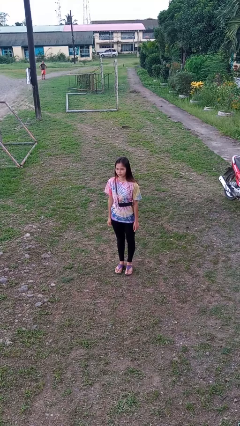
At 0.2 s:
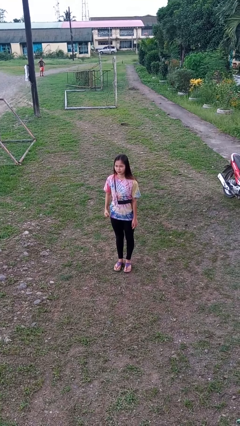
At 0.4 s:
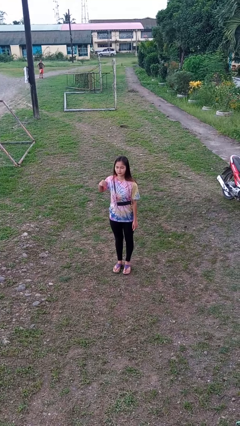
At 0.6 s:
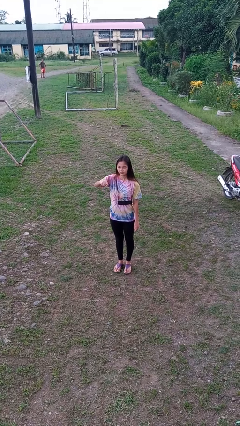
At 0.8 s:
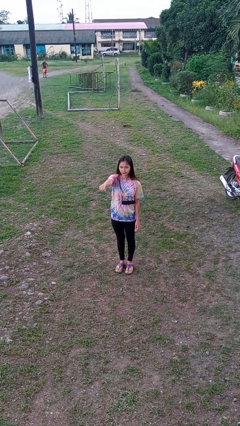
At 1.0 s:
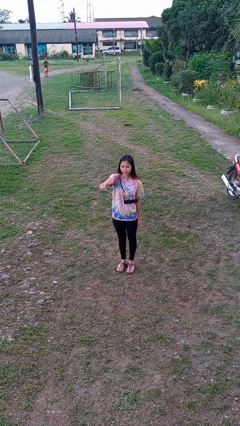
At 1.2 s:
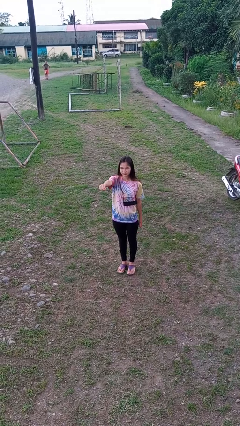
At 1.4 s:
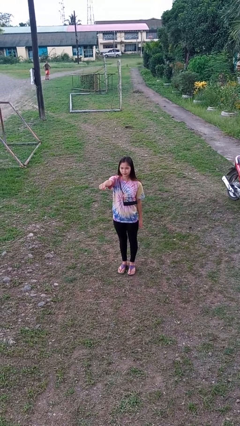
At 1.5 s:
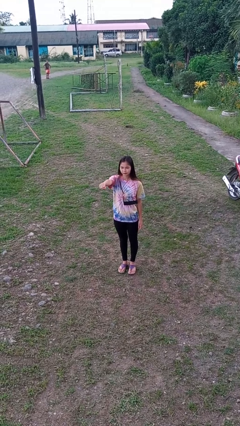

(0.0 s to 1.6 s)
person punches

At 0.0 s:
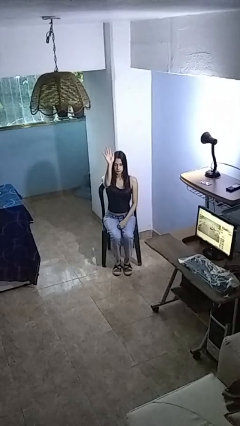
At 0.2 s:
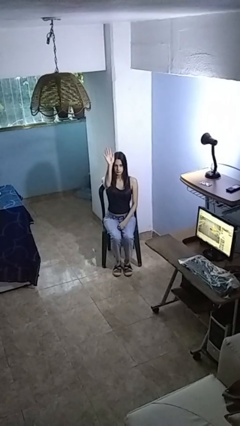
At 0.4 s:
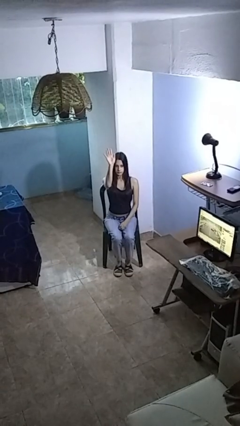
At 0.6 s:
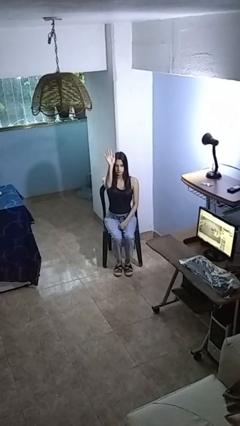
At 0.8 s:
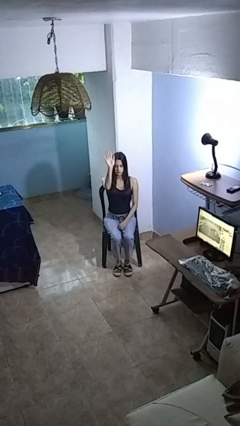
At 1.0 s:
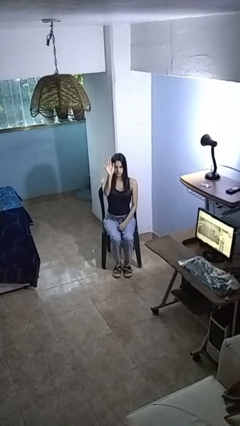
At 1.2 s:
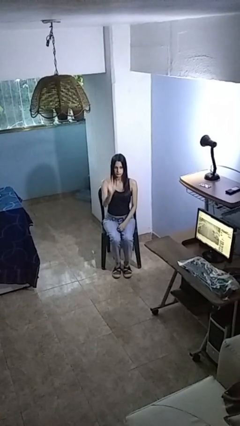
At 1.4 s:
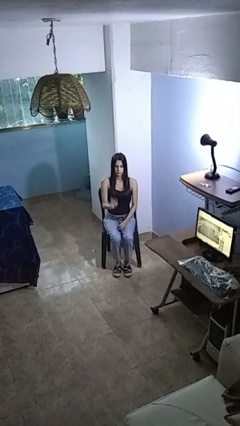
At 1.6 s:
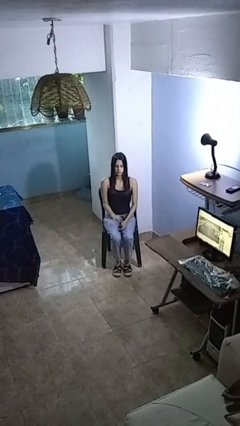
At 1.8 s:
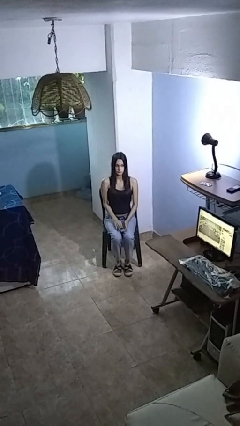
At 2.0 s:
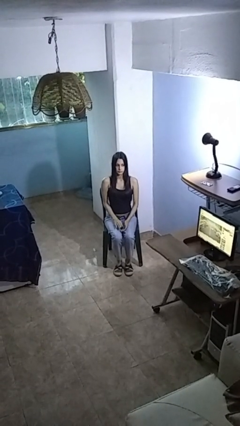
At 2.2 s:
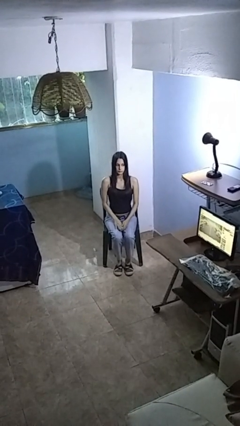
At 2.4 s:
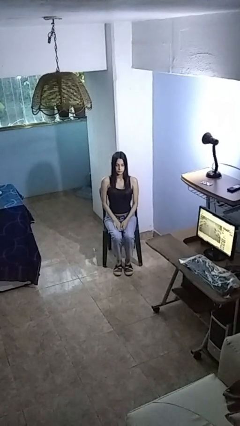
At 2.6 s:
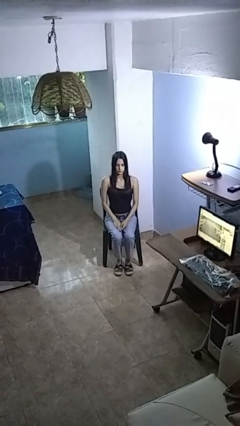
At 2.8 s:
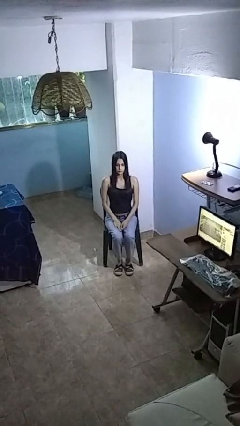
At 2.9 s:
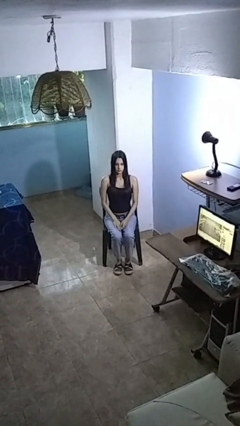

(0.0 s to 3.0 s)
person gestures lower hand

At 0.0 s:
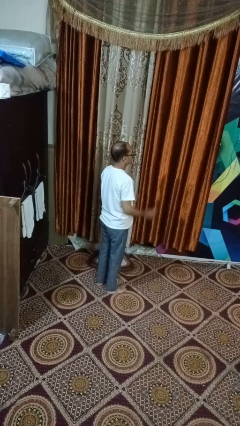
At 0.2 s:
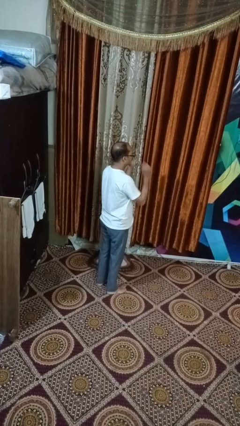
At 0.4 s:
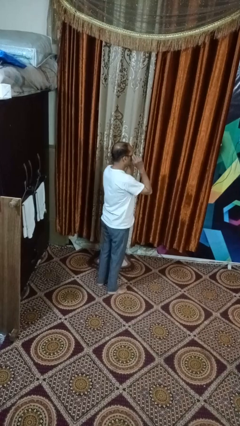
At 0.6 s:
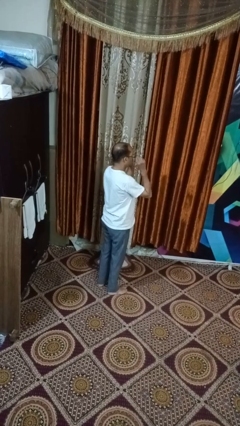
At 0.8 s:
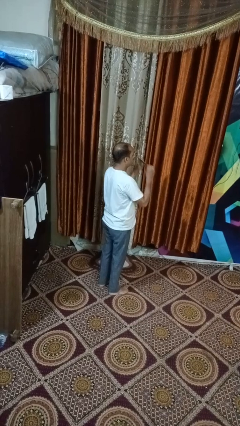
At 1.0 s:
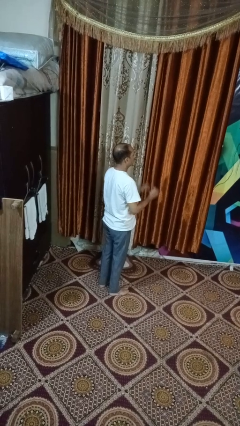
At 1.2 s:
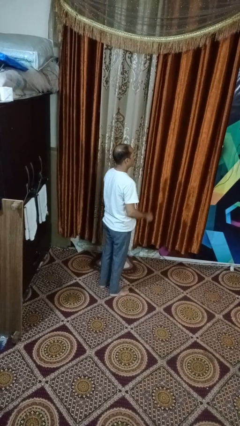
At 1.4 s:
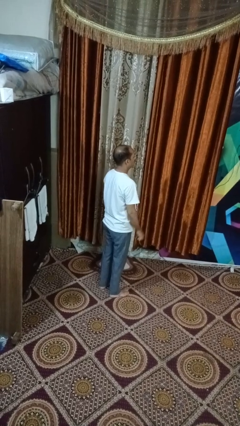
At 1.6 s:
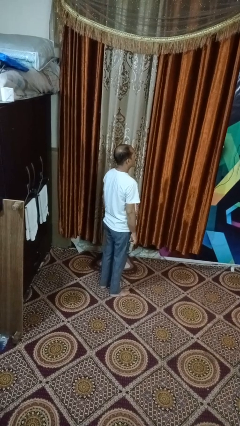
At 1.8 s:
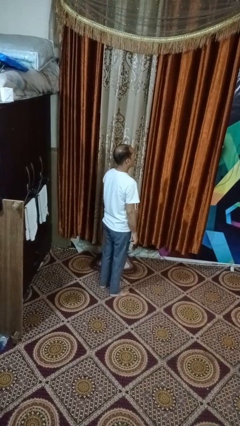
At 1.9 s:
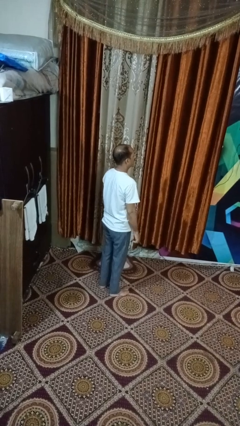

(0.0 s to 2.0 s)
person takes off glasses

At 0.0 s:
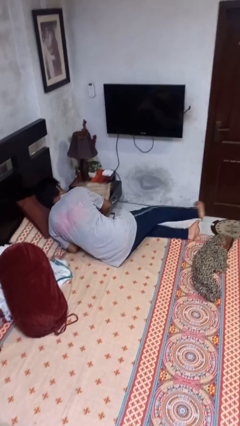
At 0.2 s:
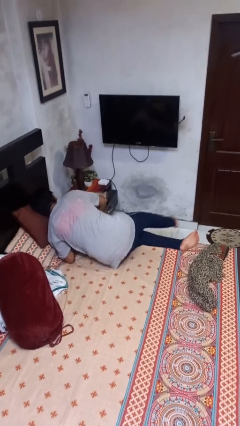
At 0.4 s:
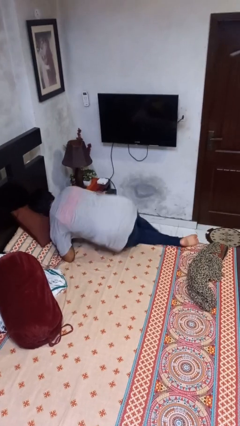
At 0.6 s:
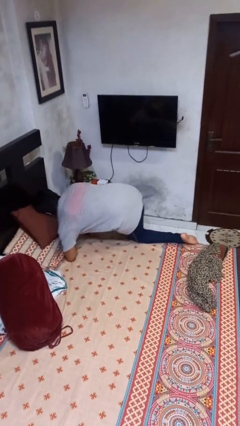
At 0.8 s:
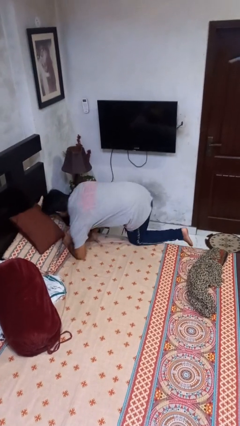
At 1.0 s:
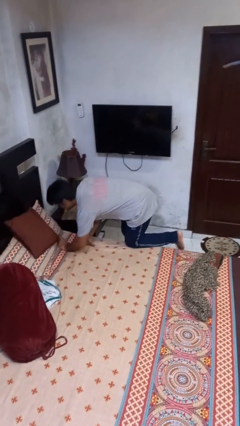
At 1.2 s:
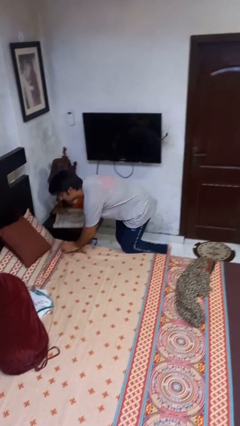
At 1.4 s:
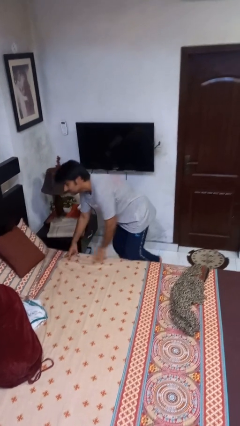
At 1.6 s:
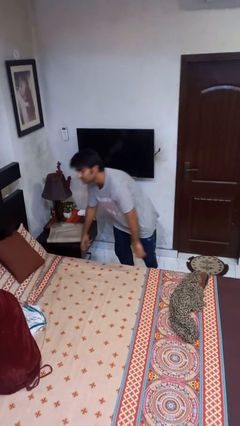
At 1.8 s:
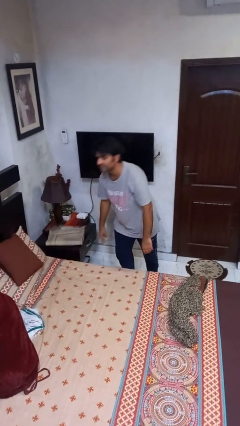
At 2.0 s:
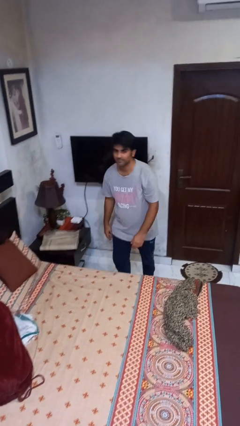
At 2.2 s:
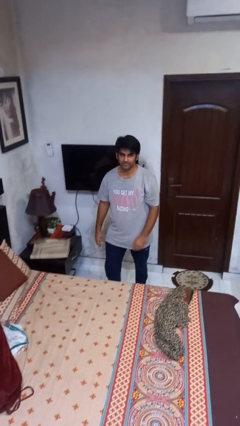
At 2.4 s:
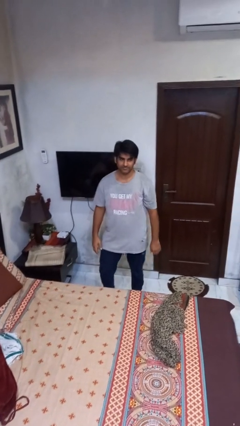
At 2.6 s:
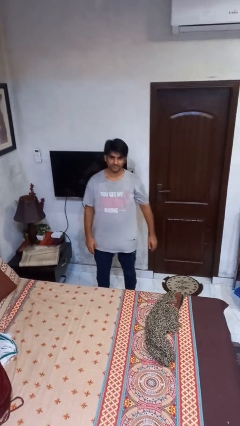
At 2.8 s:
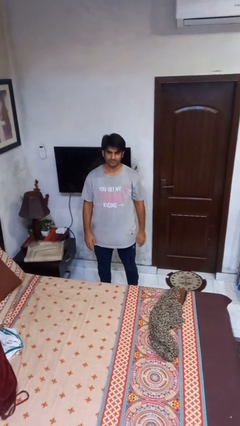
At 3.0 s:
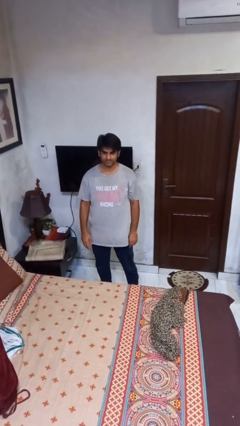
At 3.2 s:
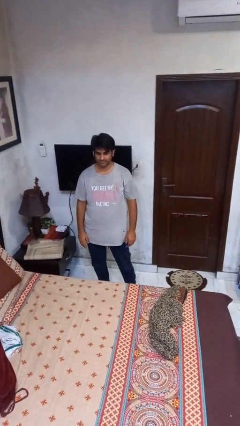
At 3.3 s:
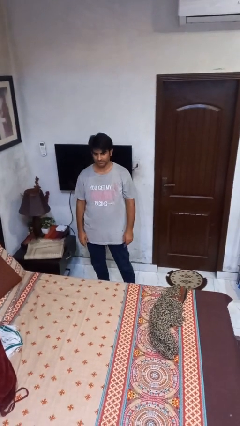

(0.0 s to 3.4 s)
person stands up

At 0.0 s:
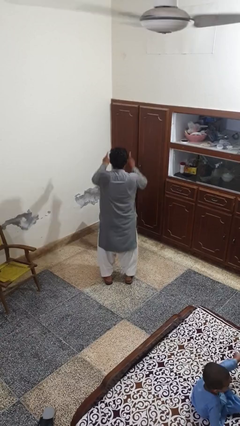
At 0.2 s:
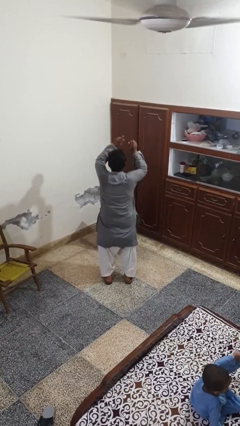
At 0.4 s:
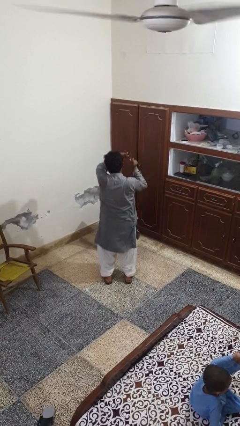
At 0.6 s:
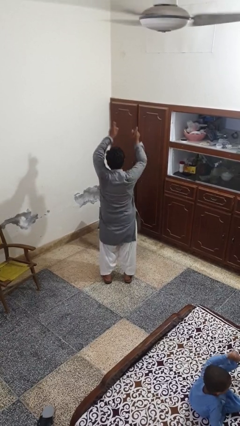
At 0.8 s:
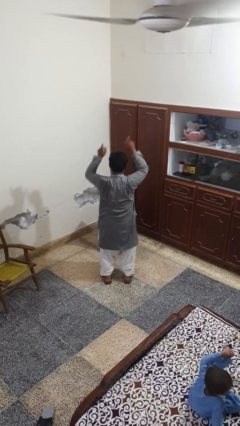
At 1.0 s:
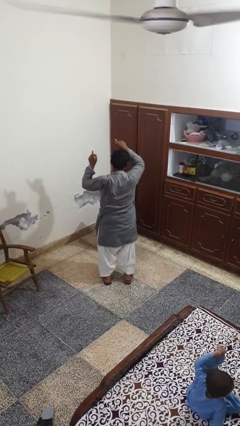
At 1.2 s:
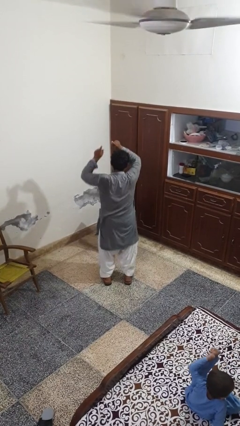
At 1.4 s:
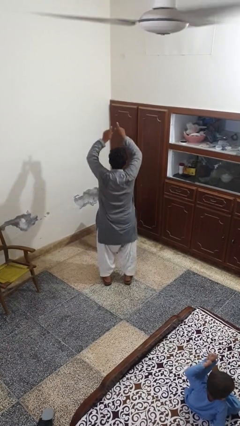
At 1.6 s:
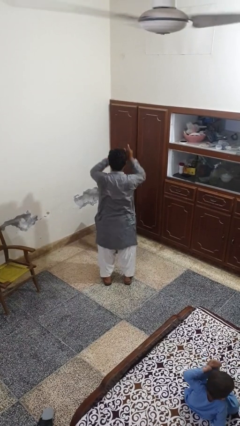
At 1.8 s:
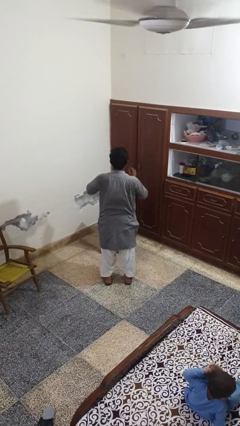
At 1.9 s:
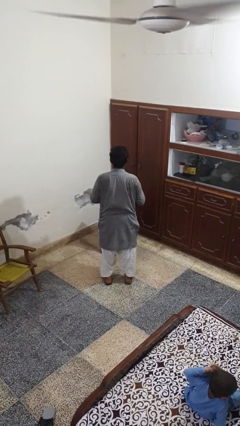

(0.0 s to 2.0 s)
person dances in place

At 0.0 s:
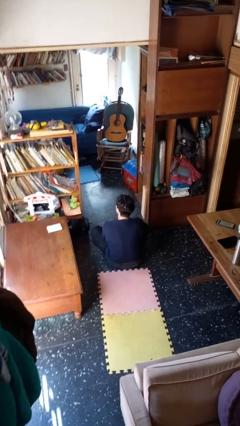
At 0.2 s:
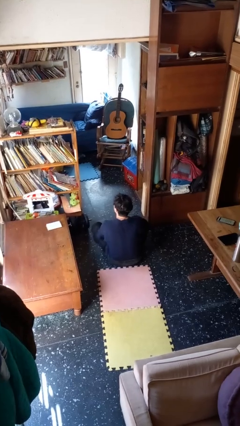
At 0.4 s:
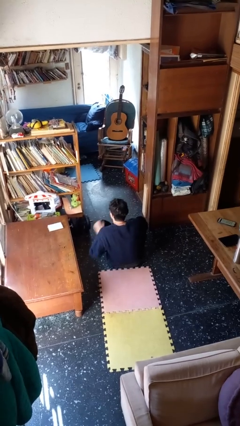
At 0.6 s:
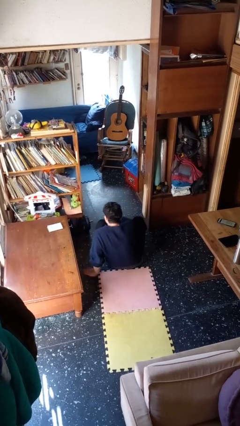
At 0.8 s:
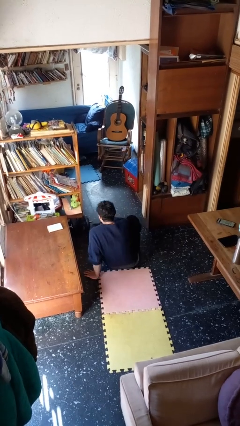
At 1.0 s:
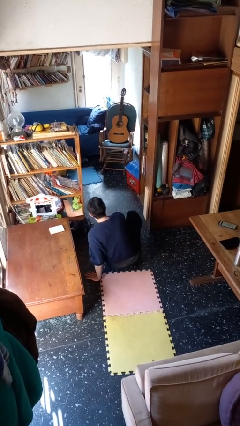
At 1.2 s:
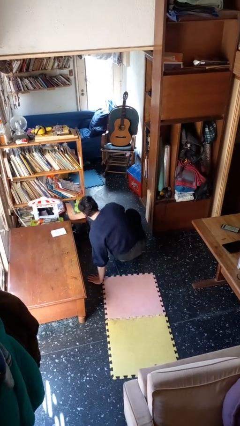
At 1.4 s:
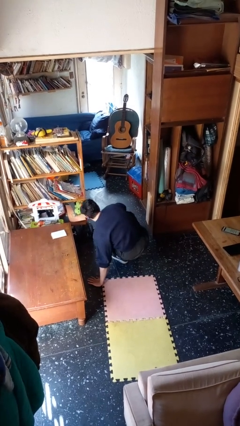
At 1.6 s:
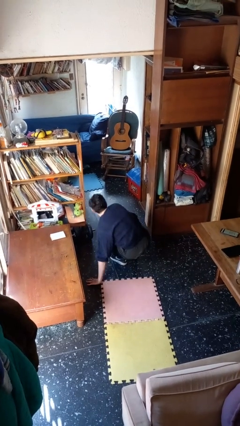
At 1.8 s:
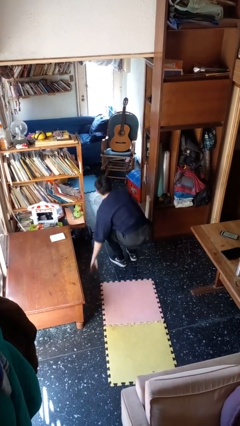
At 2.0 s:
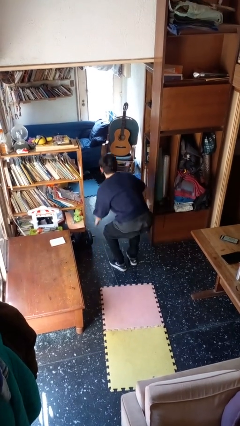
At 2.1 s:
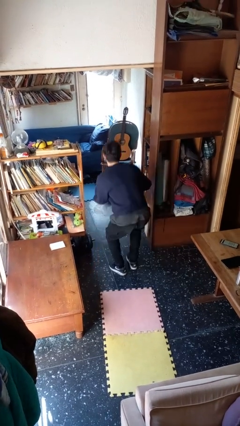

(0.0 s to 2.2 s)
person stands up from floor

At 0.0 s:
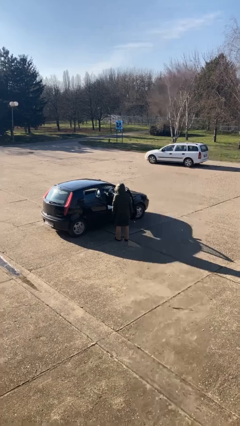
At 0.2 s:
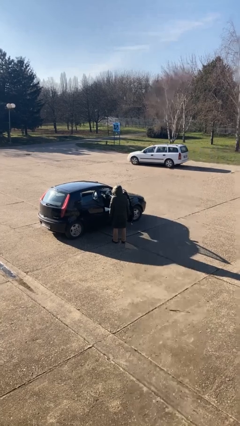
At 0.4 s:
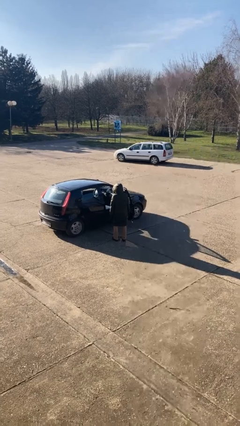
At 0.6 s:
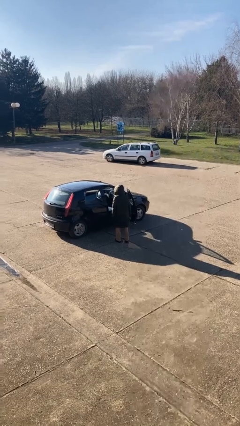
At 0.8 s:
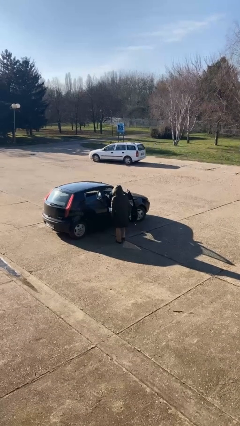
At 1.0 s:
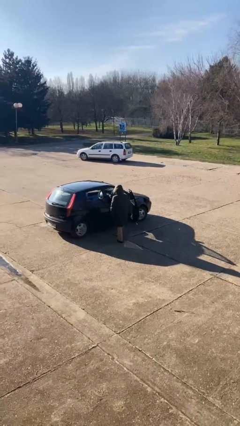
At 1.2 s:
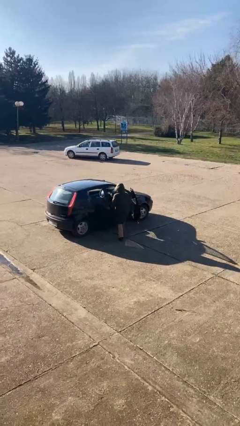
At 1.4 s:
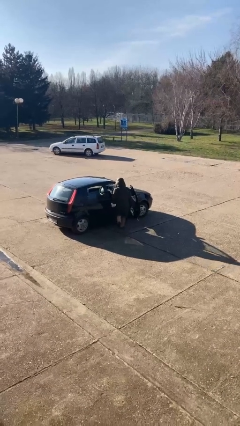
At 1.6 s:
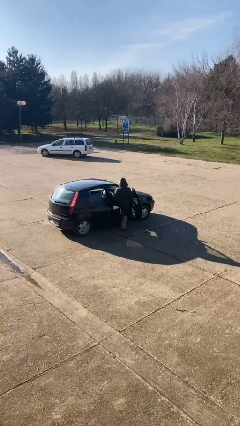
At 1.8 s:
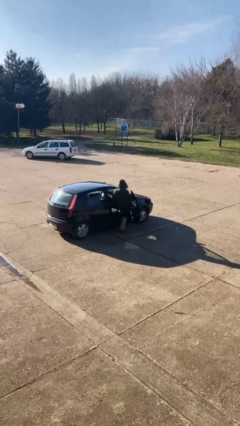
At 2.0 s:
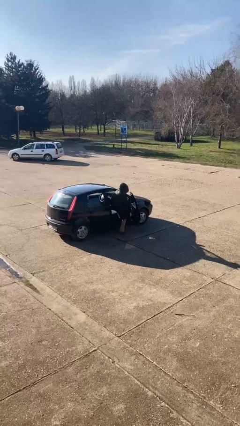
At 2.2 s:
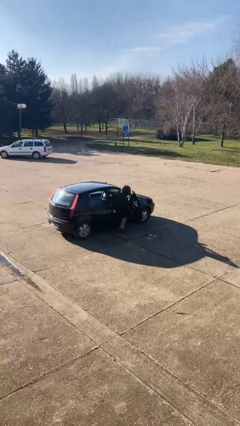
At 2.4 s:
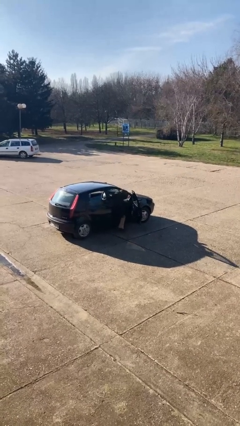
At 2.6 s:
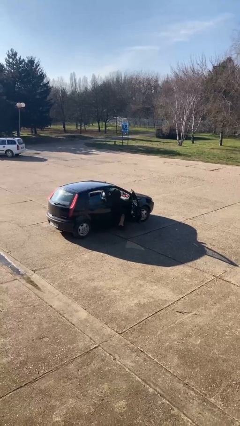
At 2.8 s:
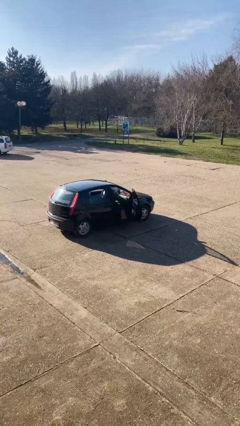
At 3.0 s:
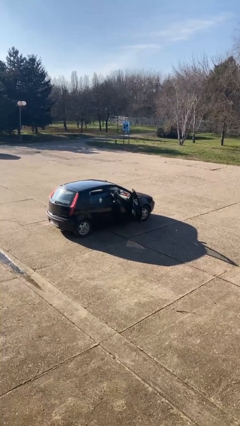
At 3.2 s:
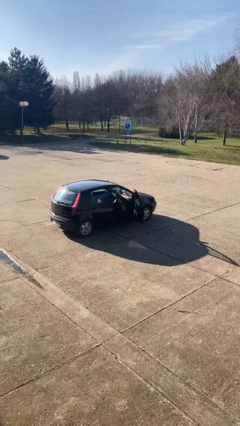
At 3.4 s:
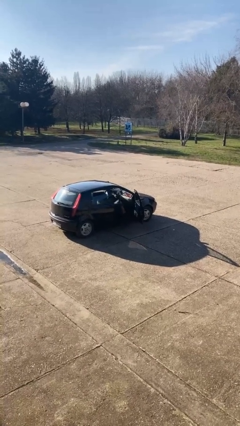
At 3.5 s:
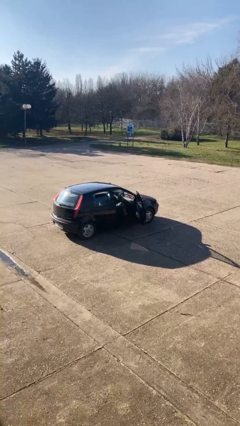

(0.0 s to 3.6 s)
person enters car
